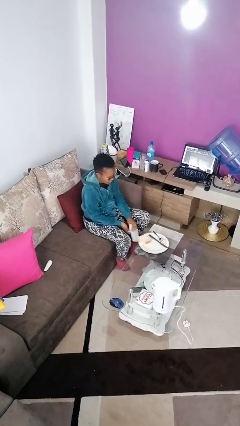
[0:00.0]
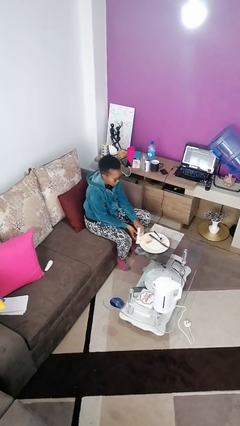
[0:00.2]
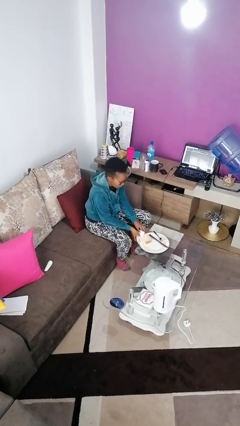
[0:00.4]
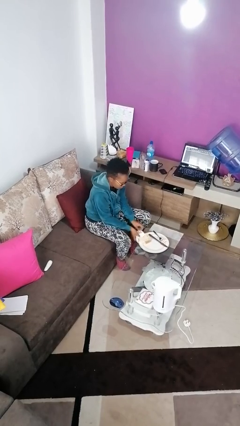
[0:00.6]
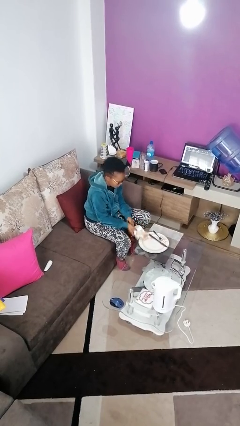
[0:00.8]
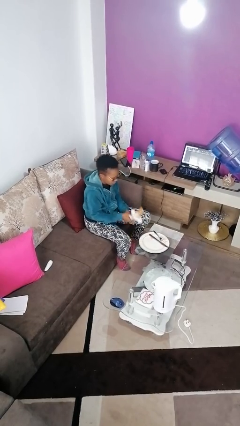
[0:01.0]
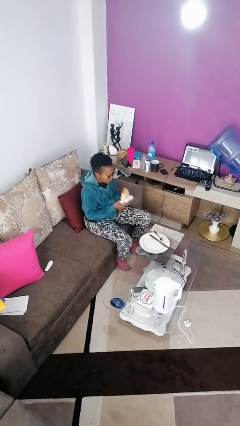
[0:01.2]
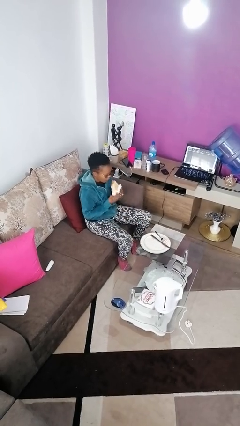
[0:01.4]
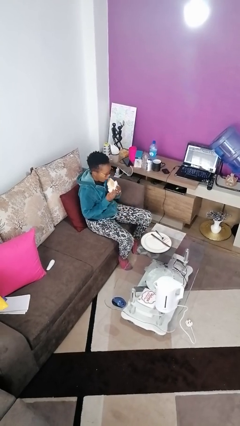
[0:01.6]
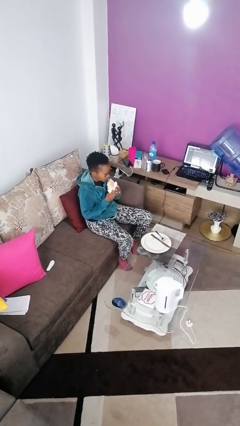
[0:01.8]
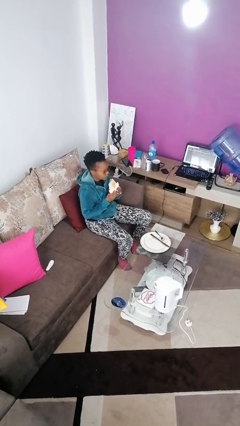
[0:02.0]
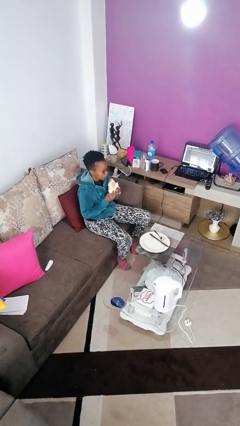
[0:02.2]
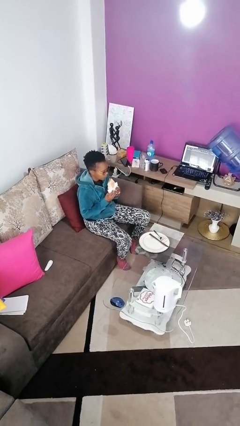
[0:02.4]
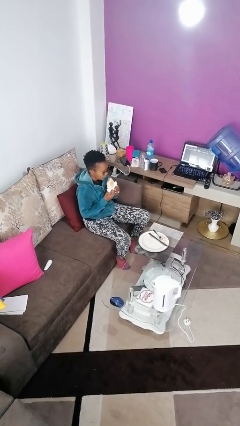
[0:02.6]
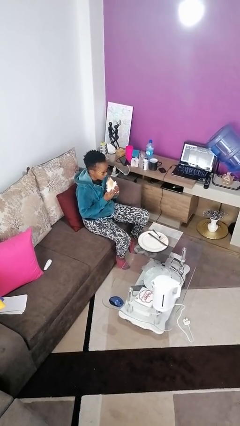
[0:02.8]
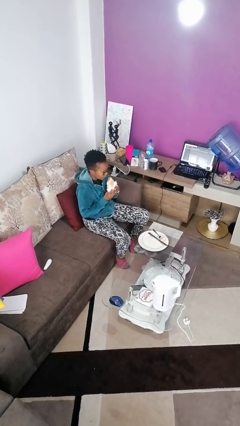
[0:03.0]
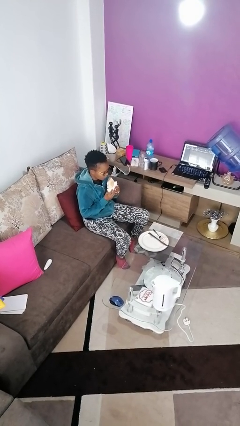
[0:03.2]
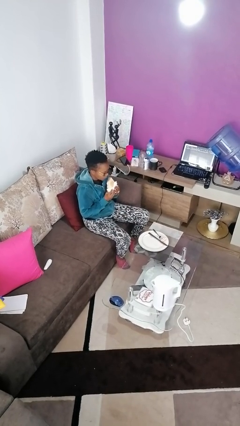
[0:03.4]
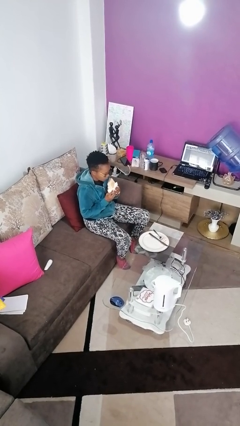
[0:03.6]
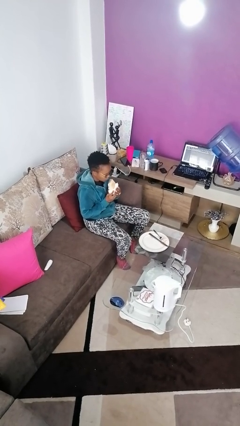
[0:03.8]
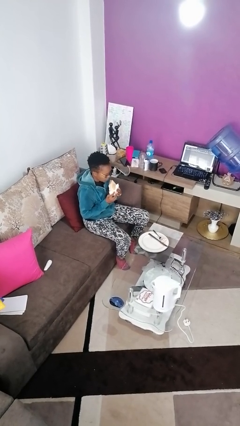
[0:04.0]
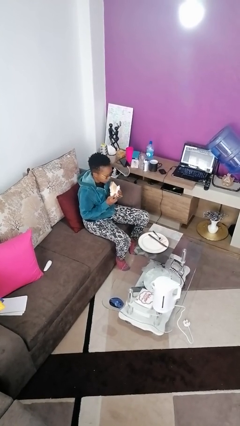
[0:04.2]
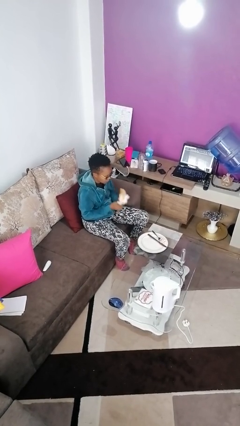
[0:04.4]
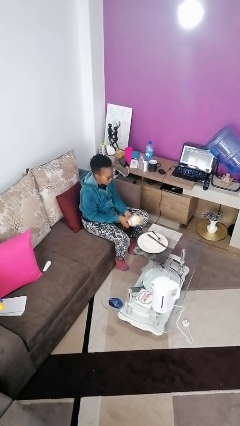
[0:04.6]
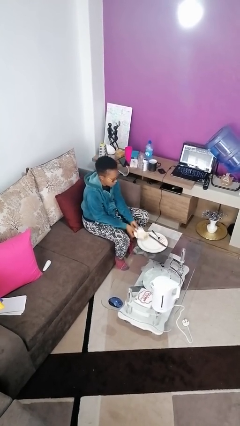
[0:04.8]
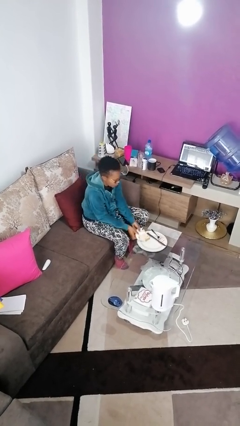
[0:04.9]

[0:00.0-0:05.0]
person eats with hands

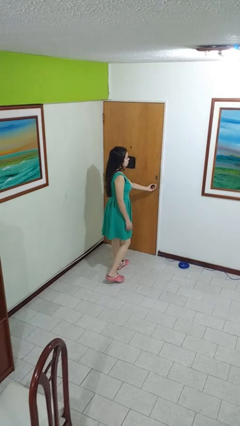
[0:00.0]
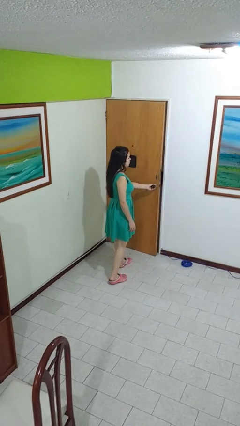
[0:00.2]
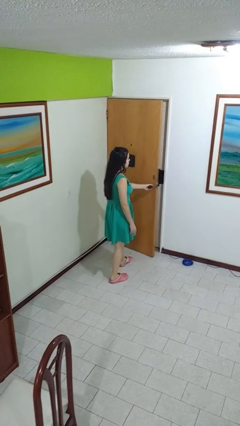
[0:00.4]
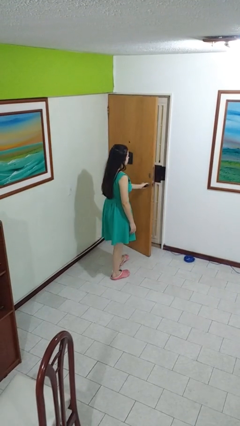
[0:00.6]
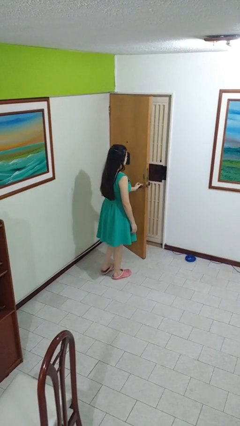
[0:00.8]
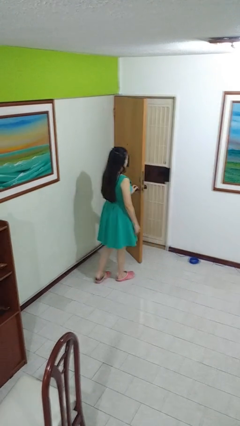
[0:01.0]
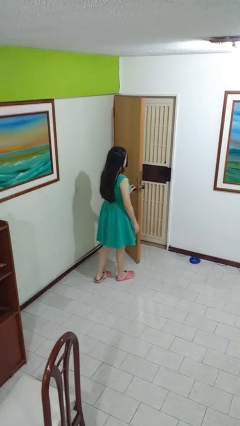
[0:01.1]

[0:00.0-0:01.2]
person opens facility door

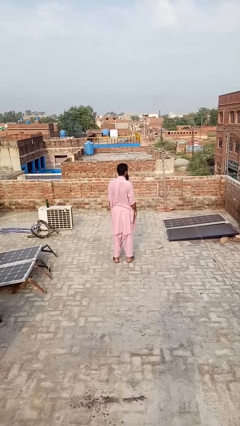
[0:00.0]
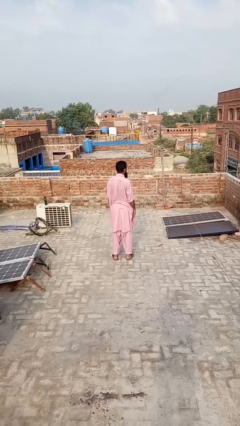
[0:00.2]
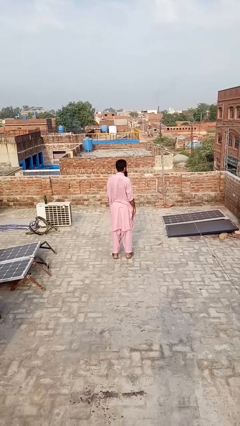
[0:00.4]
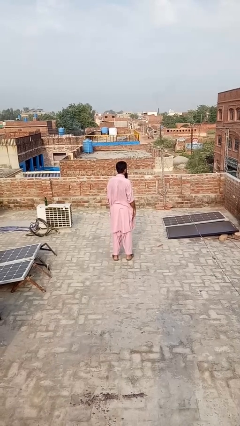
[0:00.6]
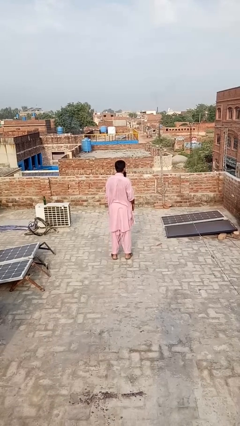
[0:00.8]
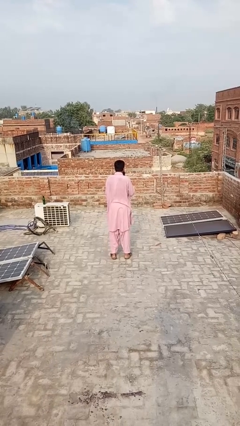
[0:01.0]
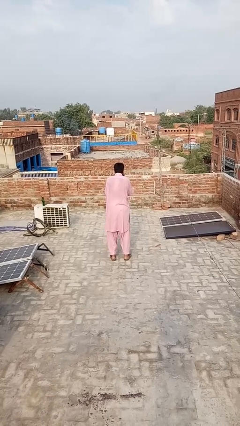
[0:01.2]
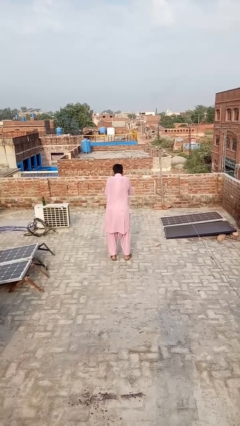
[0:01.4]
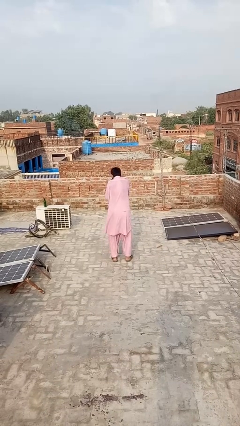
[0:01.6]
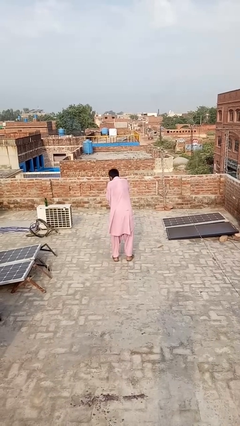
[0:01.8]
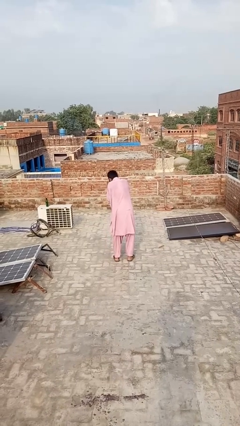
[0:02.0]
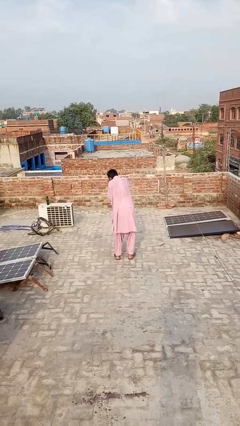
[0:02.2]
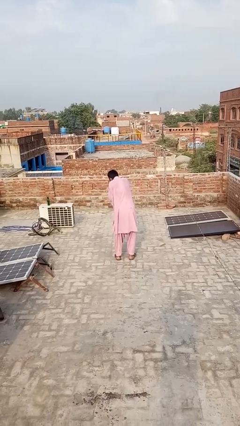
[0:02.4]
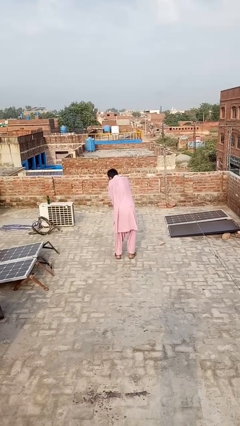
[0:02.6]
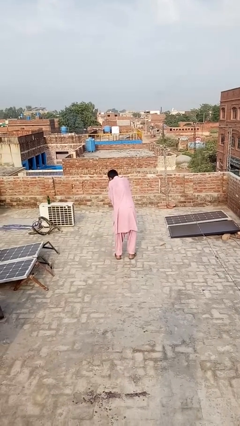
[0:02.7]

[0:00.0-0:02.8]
person blows into hands

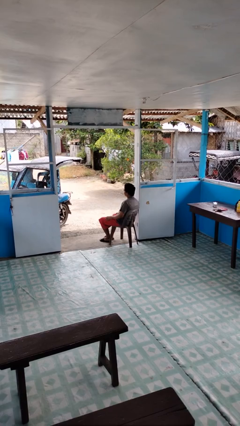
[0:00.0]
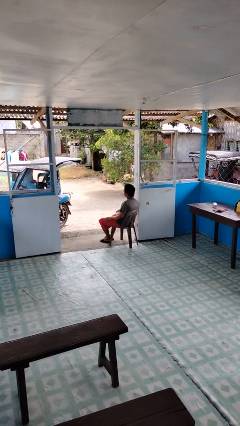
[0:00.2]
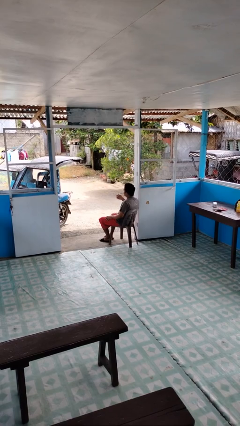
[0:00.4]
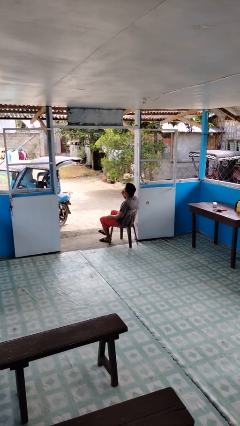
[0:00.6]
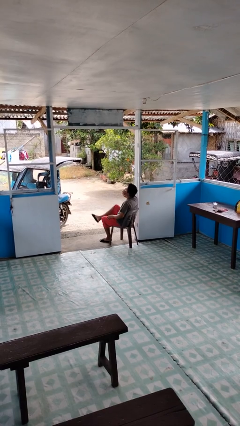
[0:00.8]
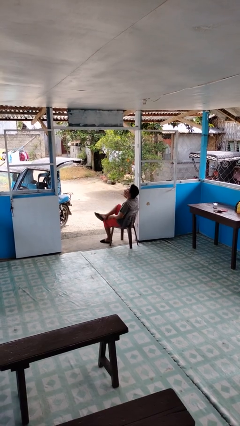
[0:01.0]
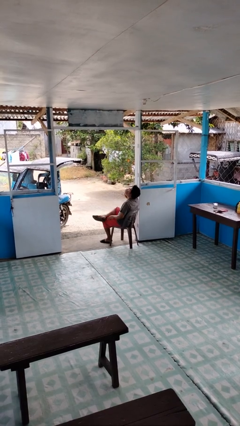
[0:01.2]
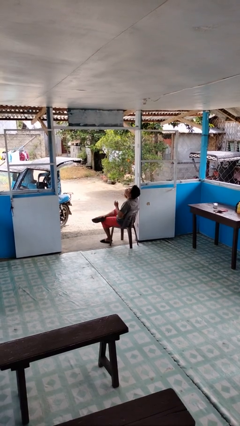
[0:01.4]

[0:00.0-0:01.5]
person yawns

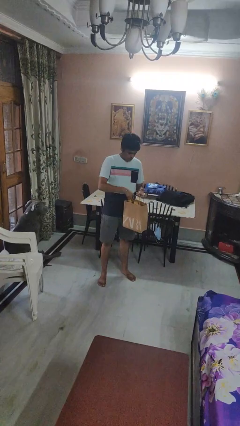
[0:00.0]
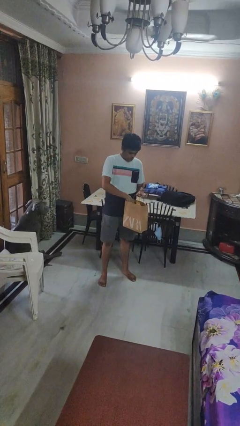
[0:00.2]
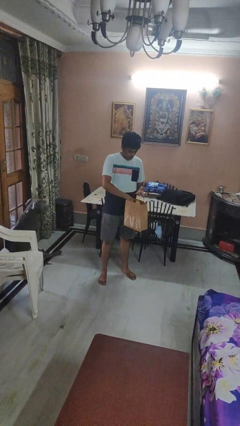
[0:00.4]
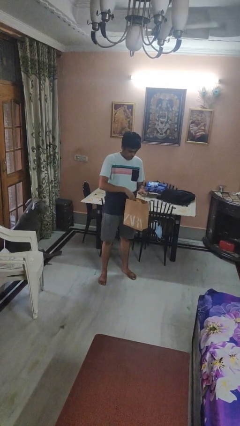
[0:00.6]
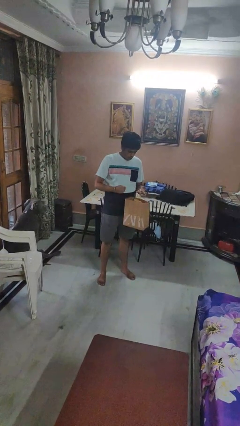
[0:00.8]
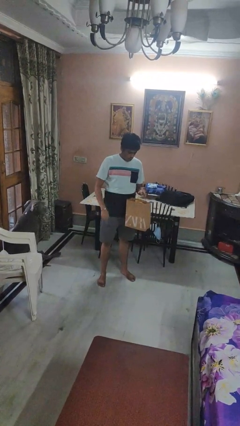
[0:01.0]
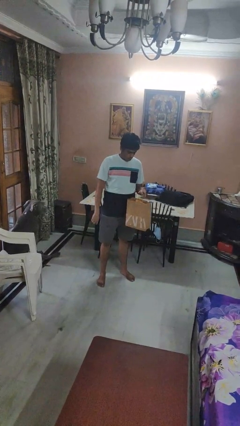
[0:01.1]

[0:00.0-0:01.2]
person puts object into bag

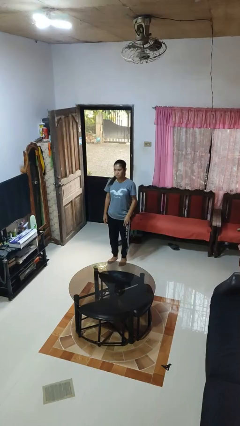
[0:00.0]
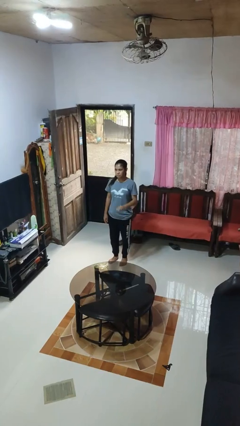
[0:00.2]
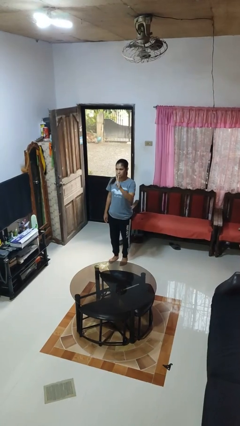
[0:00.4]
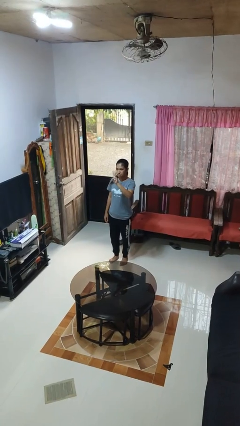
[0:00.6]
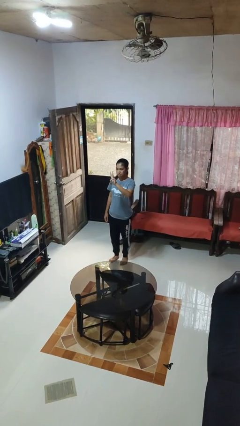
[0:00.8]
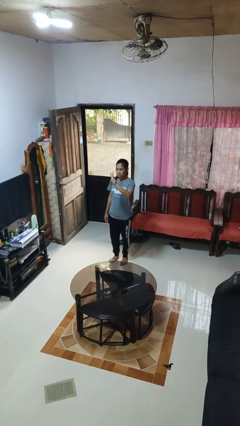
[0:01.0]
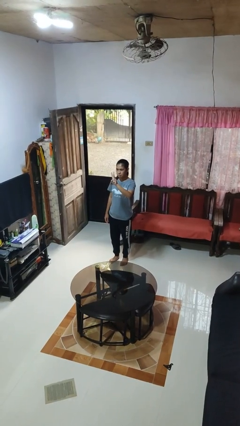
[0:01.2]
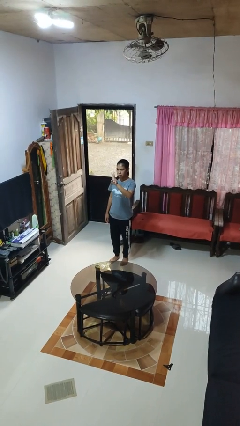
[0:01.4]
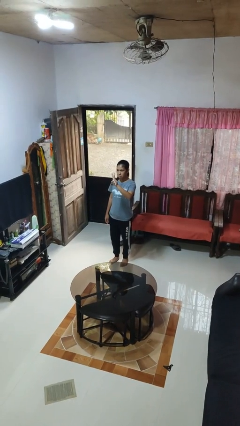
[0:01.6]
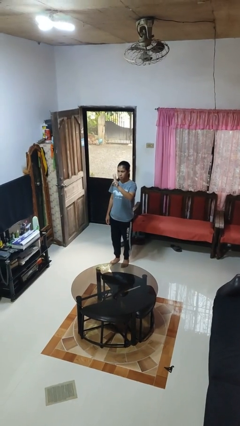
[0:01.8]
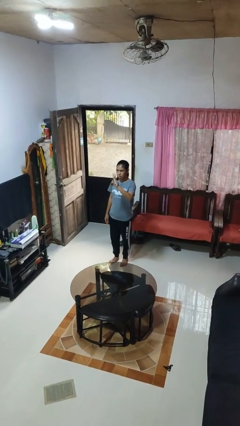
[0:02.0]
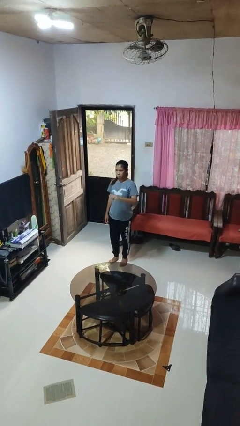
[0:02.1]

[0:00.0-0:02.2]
person gestures number three

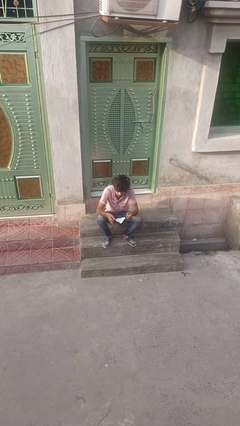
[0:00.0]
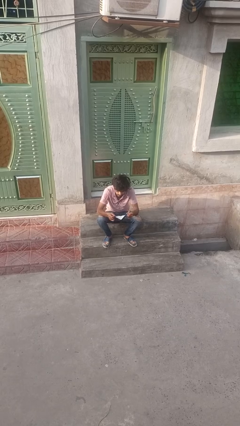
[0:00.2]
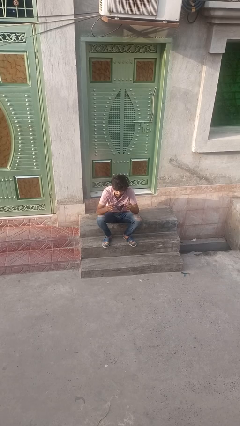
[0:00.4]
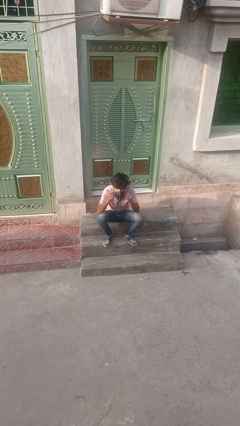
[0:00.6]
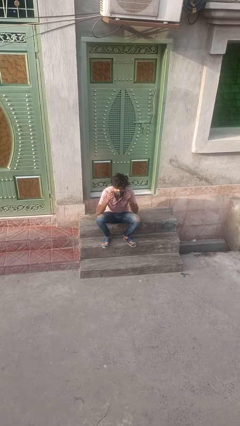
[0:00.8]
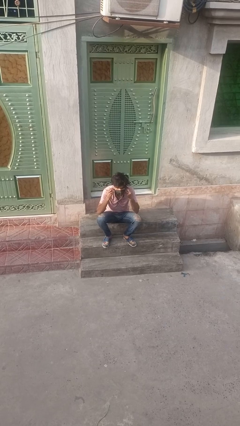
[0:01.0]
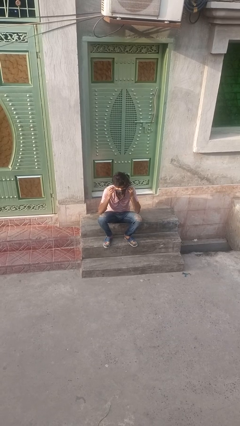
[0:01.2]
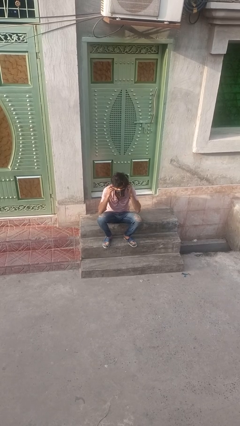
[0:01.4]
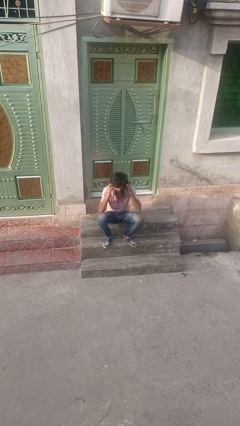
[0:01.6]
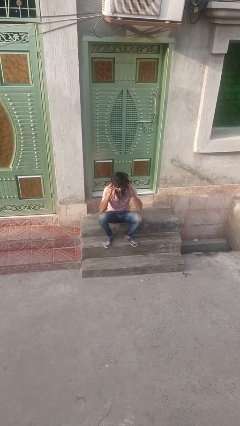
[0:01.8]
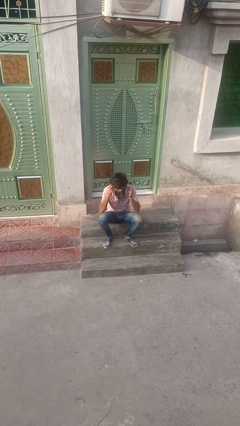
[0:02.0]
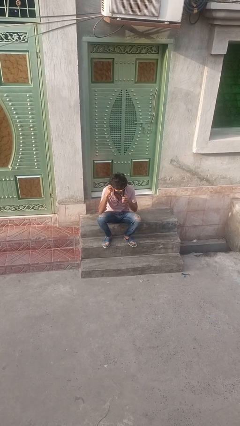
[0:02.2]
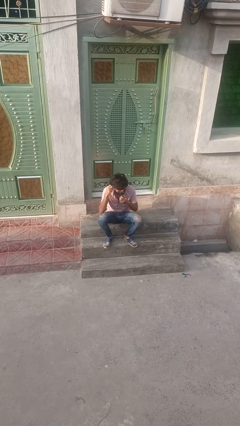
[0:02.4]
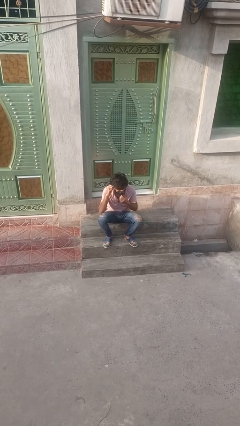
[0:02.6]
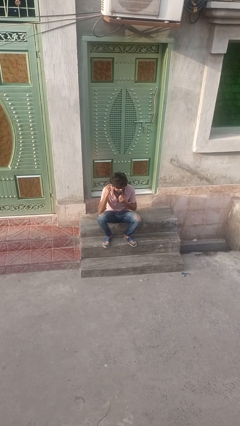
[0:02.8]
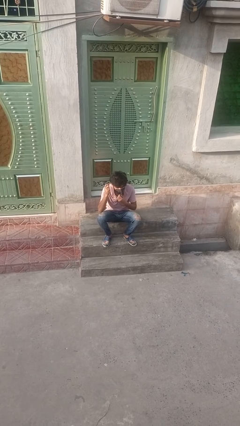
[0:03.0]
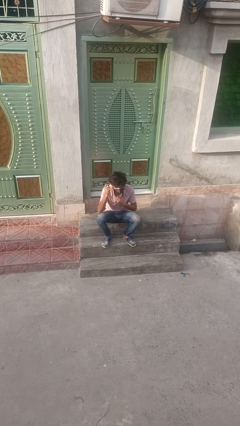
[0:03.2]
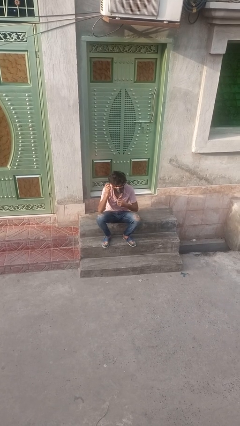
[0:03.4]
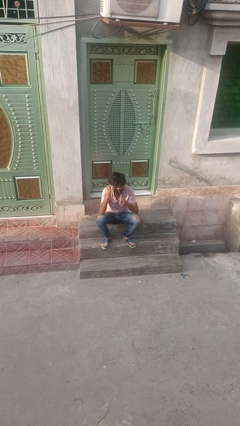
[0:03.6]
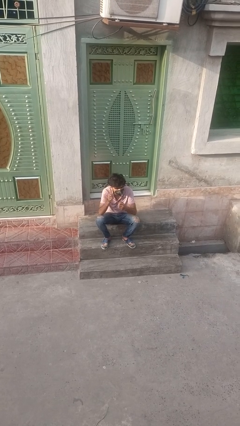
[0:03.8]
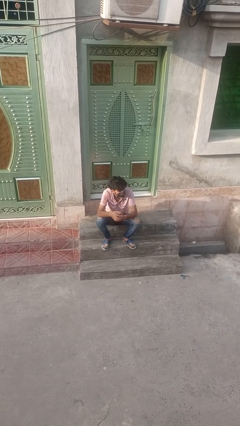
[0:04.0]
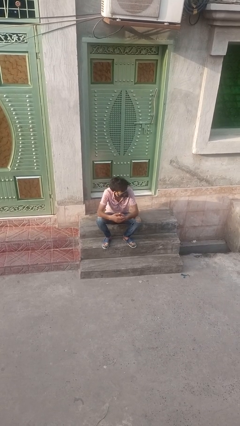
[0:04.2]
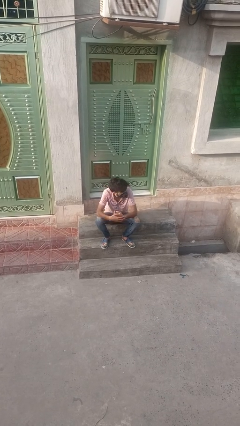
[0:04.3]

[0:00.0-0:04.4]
person puts on facemask
